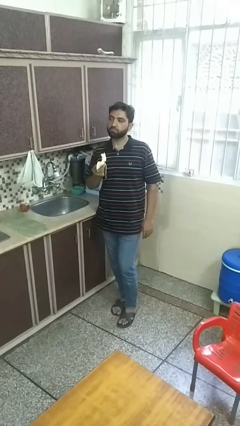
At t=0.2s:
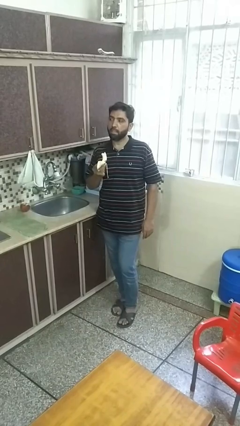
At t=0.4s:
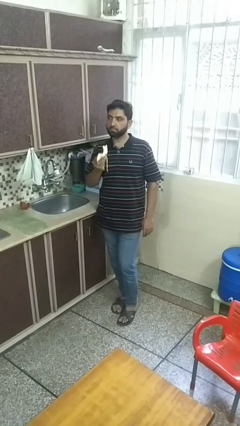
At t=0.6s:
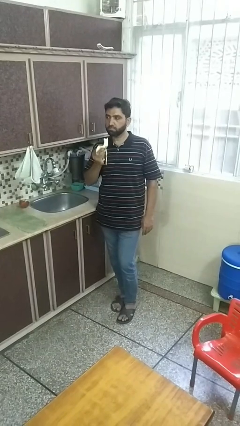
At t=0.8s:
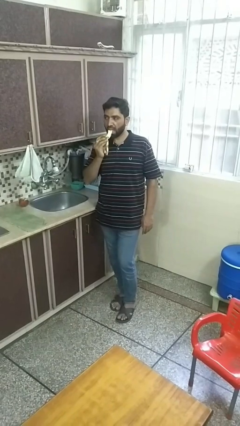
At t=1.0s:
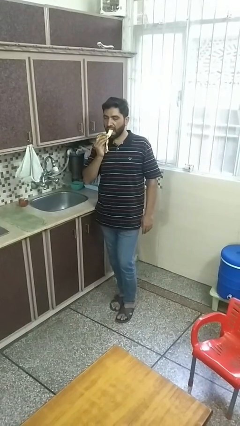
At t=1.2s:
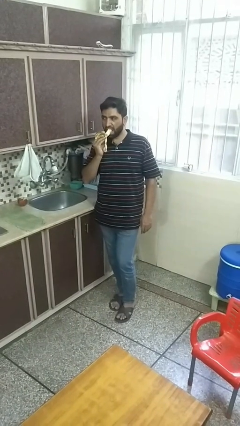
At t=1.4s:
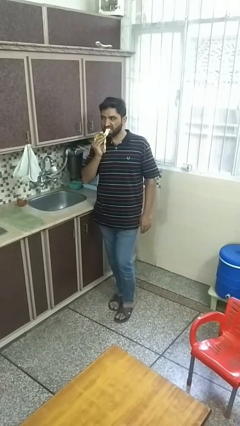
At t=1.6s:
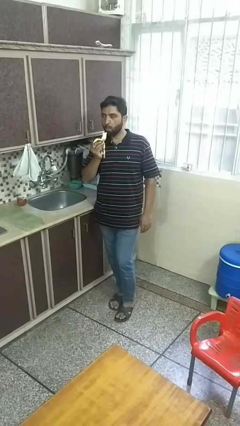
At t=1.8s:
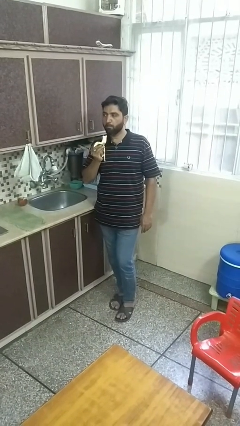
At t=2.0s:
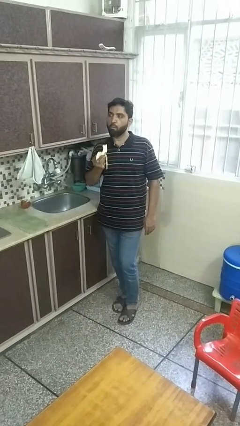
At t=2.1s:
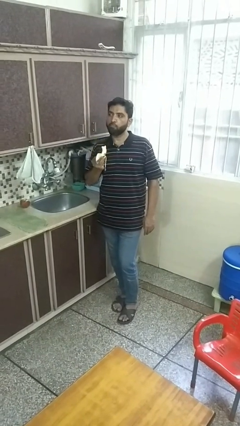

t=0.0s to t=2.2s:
person eats banana

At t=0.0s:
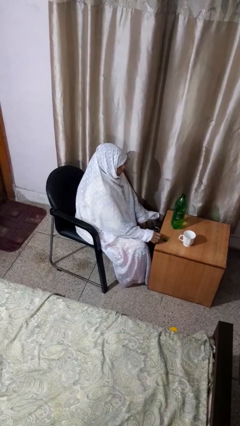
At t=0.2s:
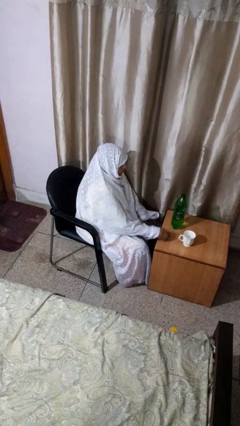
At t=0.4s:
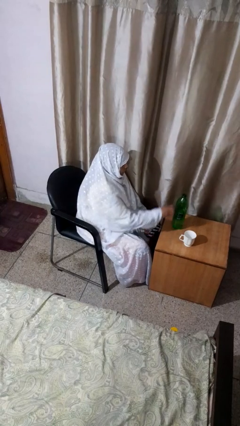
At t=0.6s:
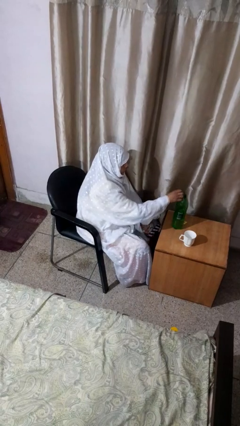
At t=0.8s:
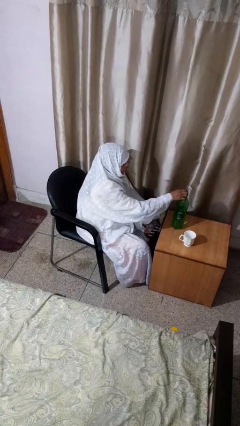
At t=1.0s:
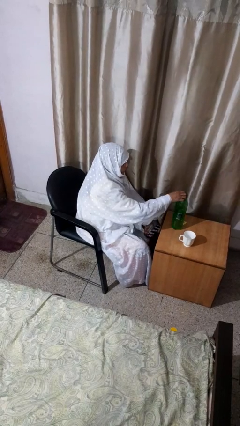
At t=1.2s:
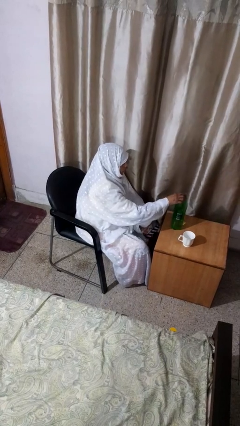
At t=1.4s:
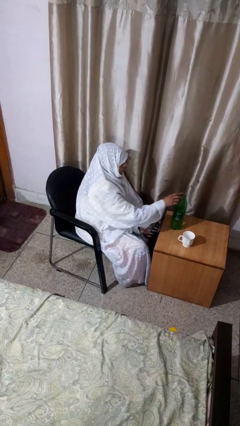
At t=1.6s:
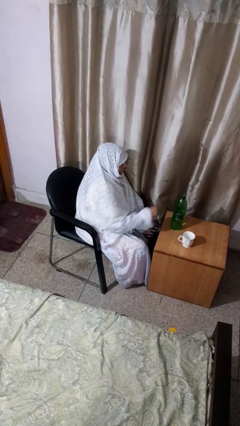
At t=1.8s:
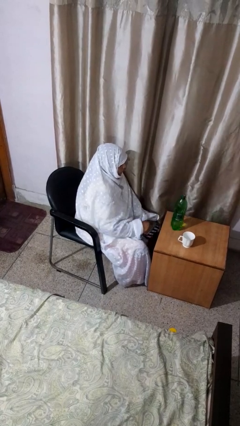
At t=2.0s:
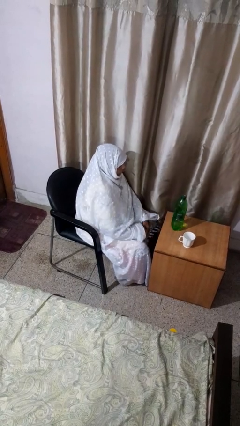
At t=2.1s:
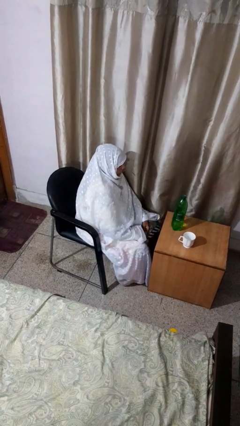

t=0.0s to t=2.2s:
person screws lid to bottle

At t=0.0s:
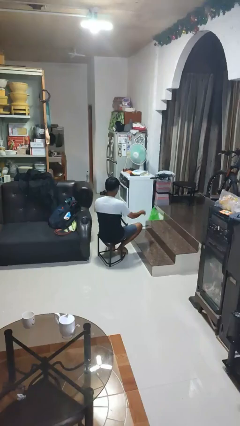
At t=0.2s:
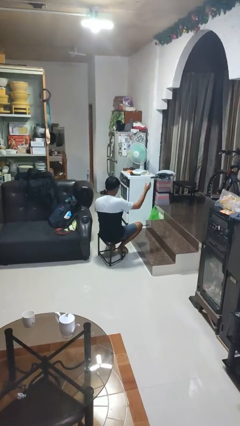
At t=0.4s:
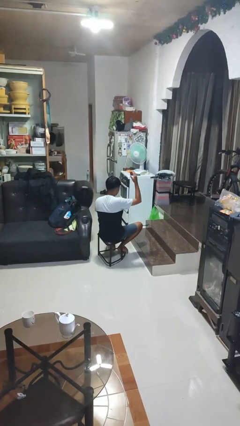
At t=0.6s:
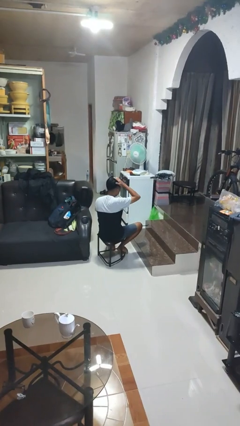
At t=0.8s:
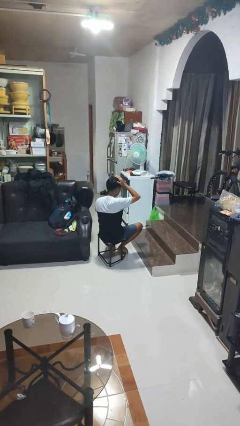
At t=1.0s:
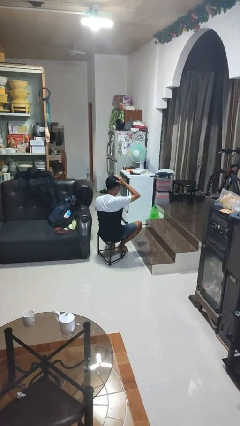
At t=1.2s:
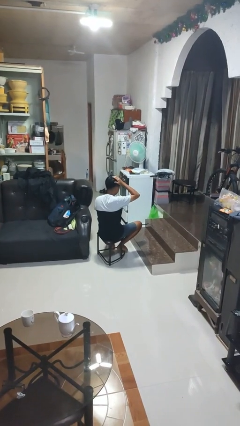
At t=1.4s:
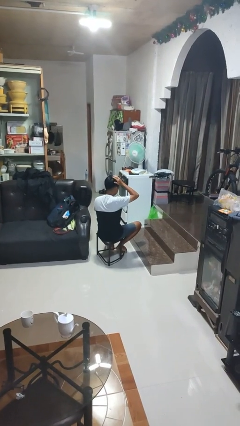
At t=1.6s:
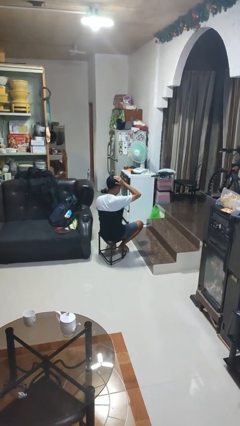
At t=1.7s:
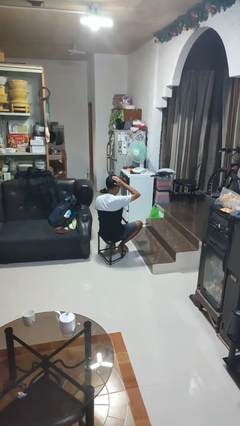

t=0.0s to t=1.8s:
person pats head

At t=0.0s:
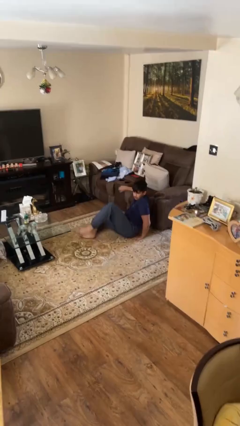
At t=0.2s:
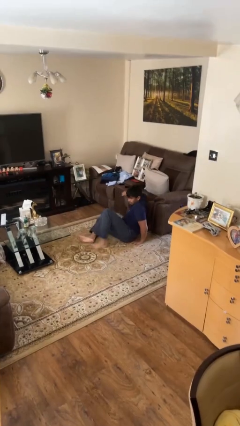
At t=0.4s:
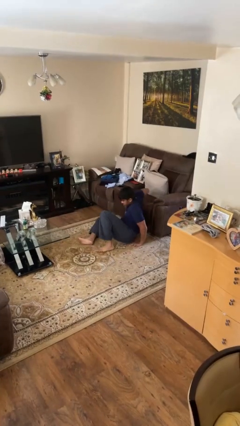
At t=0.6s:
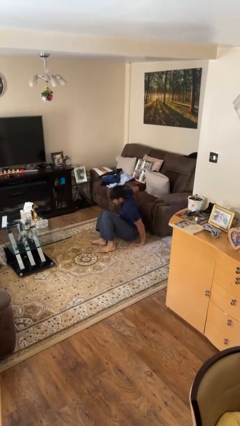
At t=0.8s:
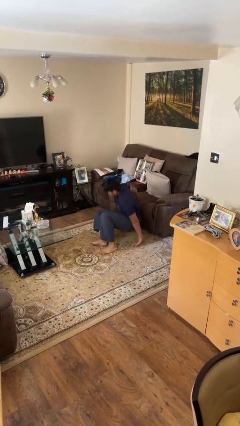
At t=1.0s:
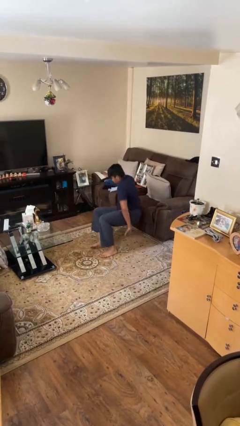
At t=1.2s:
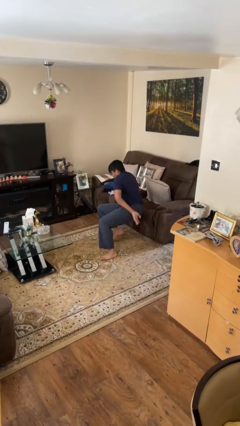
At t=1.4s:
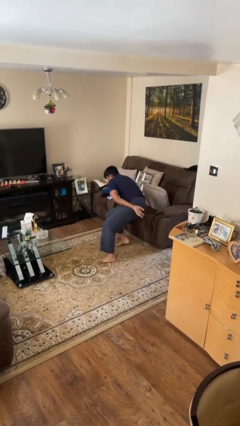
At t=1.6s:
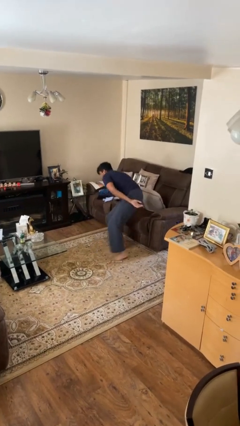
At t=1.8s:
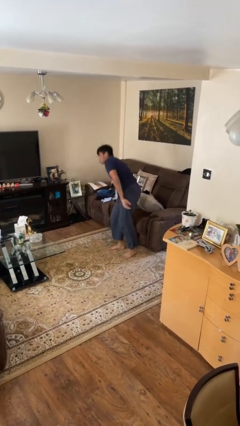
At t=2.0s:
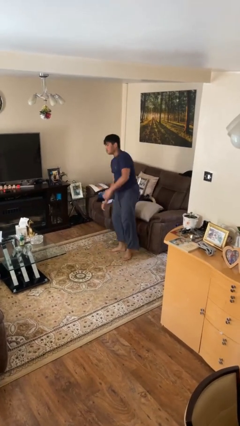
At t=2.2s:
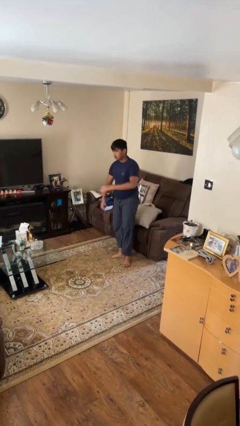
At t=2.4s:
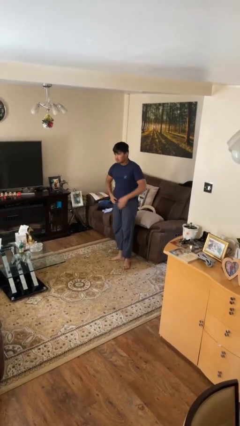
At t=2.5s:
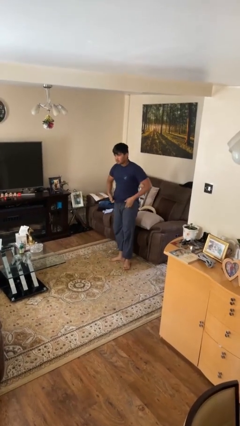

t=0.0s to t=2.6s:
person stands up from floor

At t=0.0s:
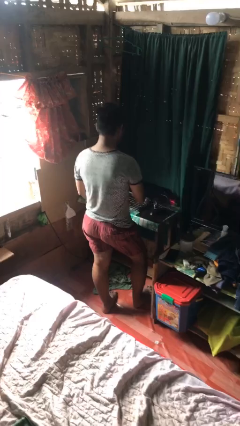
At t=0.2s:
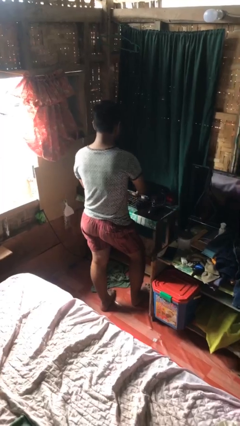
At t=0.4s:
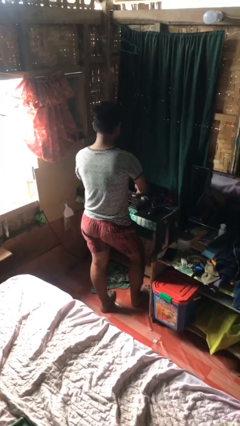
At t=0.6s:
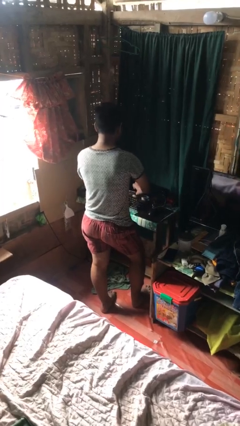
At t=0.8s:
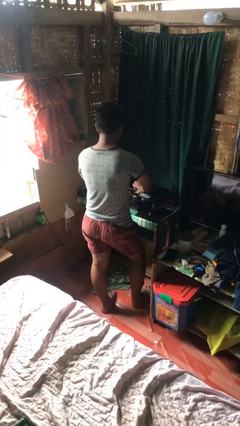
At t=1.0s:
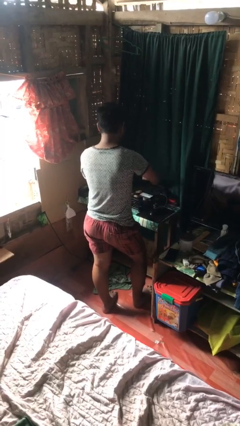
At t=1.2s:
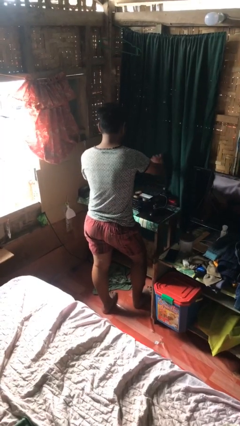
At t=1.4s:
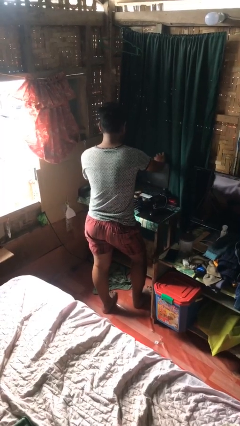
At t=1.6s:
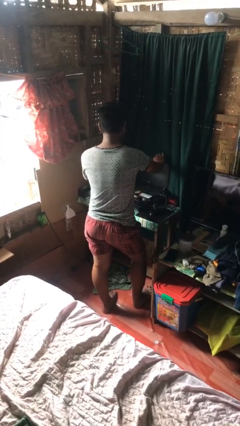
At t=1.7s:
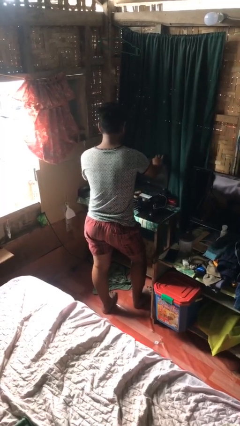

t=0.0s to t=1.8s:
person opens laptop

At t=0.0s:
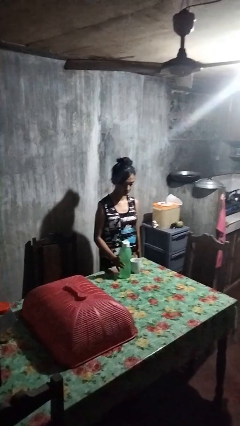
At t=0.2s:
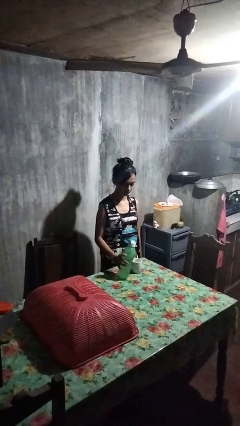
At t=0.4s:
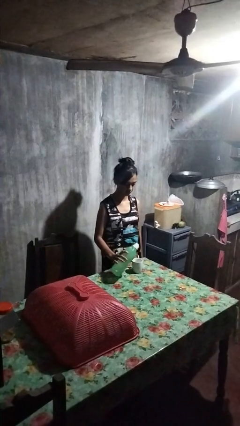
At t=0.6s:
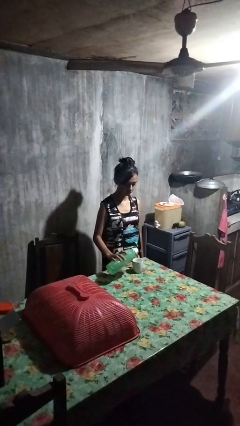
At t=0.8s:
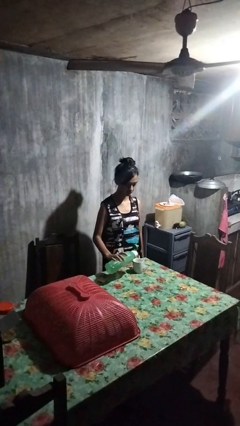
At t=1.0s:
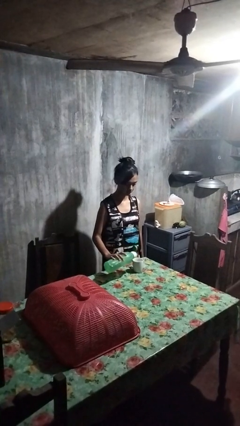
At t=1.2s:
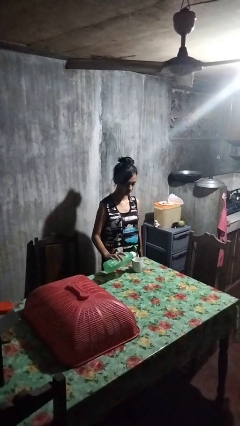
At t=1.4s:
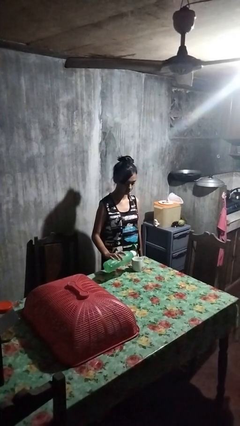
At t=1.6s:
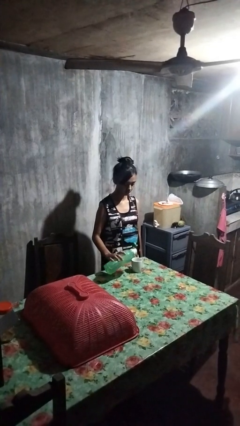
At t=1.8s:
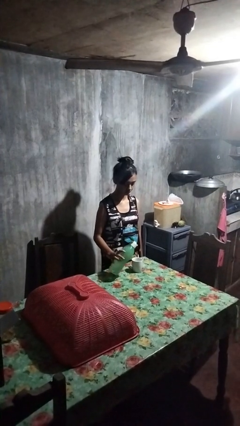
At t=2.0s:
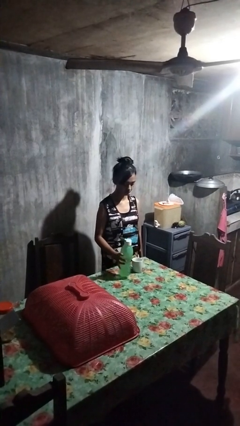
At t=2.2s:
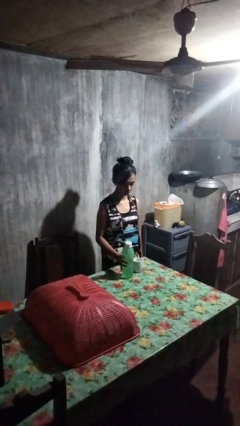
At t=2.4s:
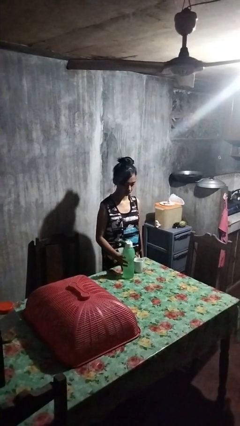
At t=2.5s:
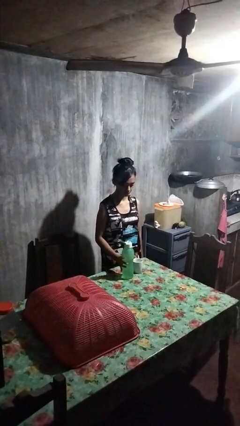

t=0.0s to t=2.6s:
person pours liquid into cup

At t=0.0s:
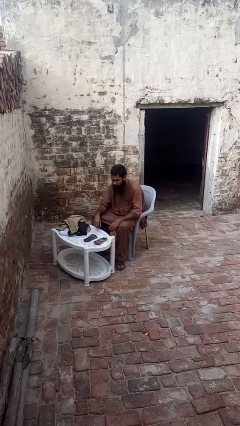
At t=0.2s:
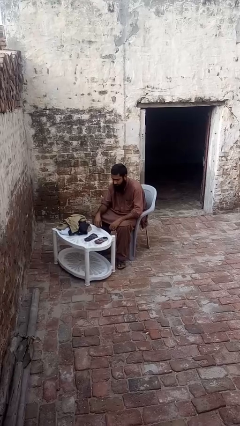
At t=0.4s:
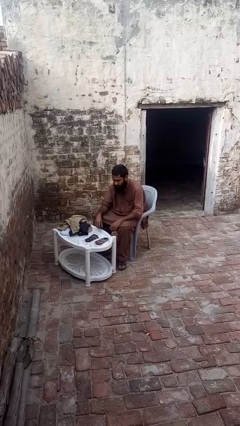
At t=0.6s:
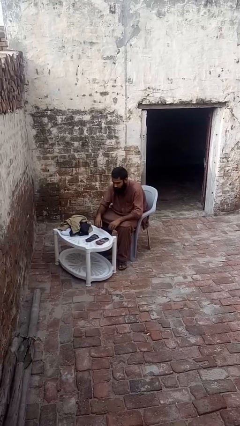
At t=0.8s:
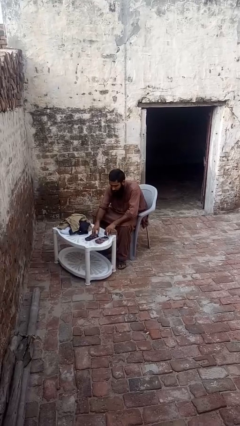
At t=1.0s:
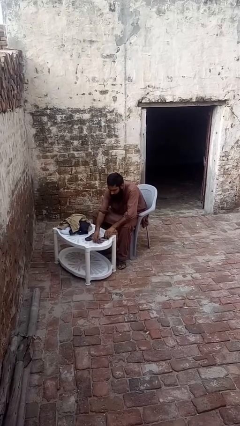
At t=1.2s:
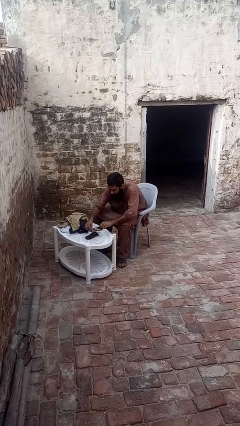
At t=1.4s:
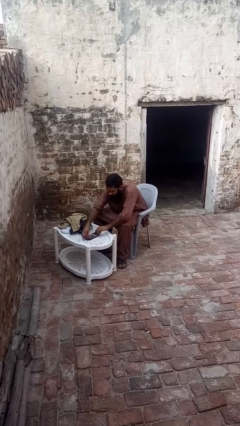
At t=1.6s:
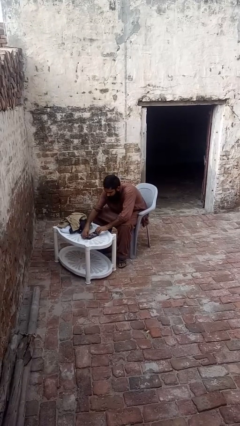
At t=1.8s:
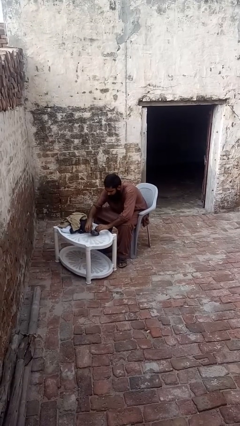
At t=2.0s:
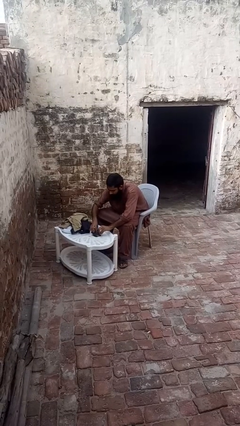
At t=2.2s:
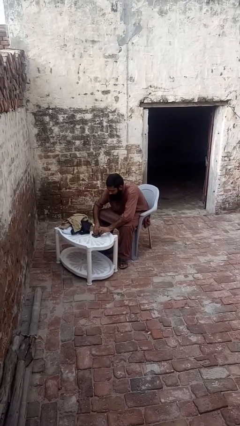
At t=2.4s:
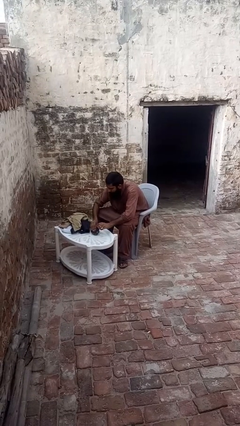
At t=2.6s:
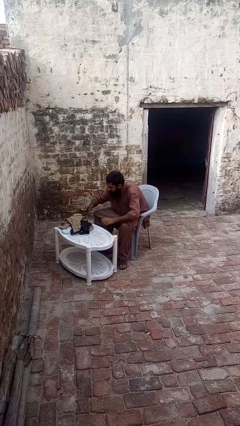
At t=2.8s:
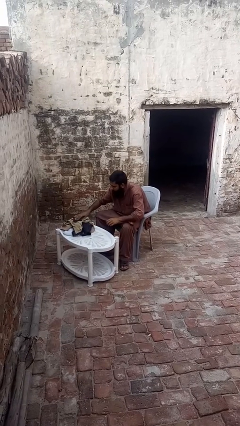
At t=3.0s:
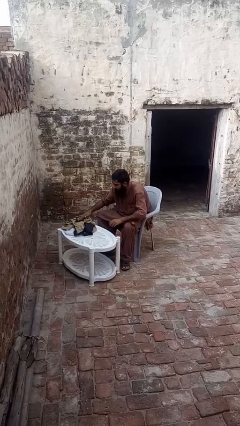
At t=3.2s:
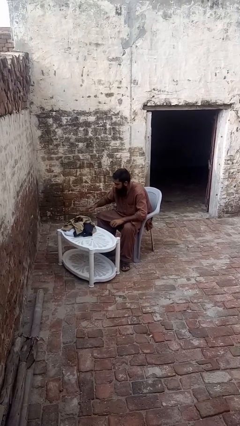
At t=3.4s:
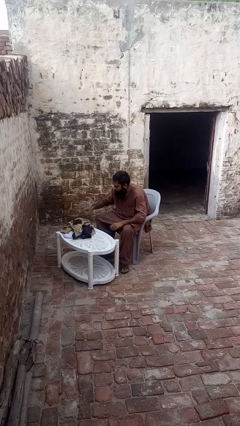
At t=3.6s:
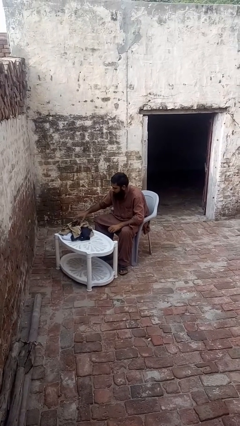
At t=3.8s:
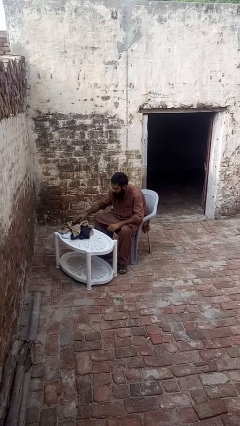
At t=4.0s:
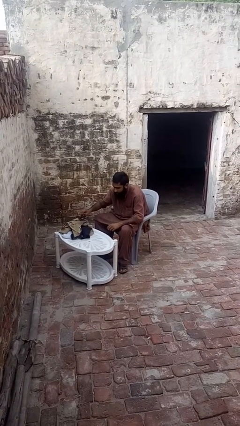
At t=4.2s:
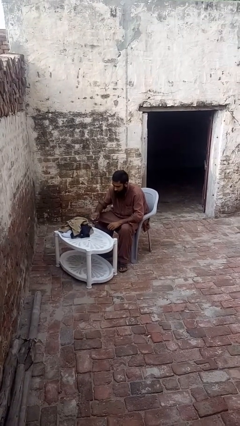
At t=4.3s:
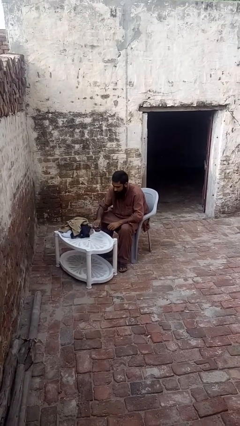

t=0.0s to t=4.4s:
person folds socks
